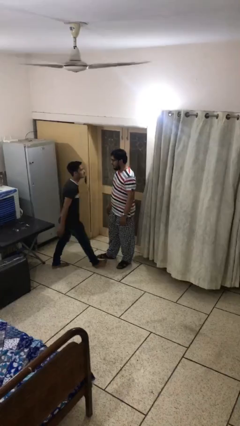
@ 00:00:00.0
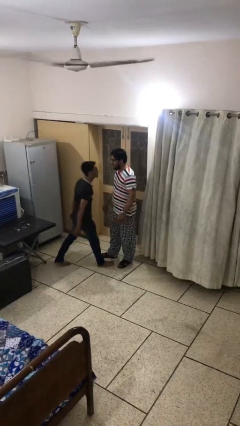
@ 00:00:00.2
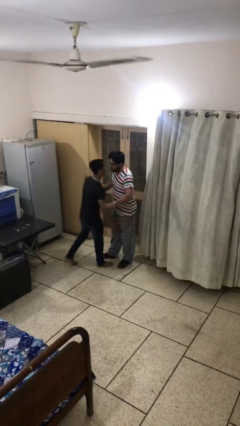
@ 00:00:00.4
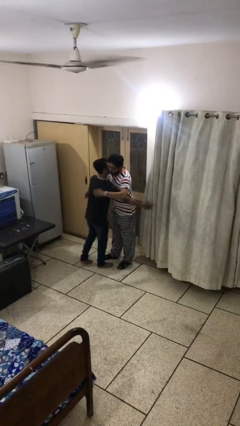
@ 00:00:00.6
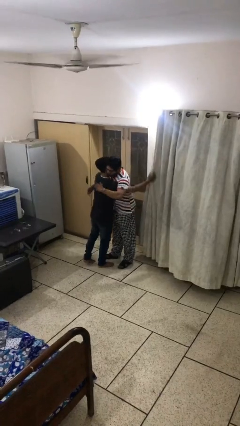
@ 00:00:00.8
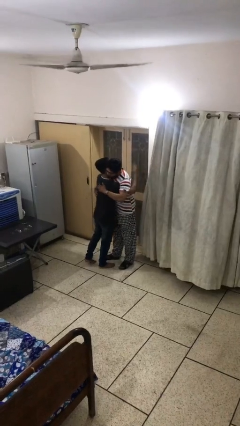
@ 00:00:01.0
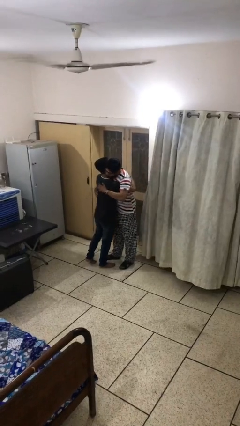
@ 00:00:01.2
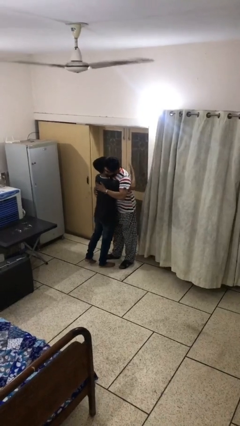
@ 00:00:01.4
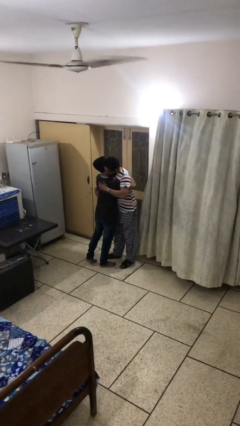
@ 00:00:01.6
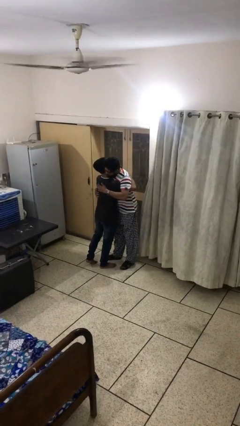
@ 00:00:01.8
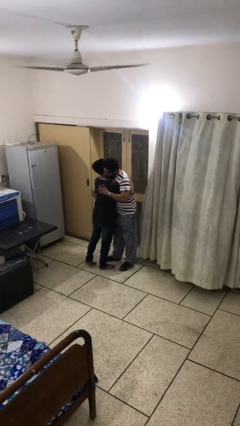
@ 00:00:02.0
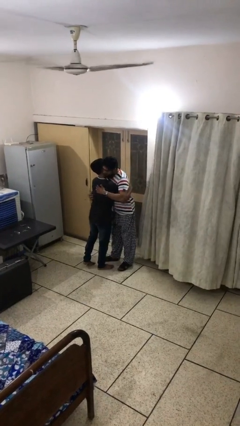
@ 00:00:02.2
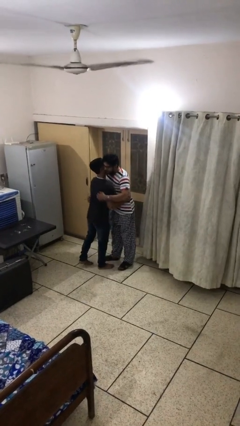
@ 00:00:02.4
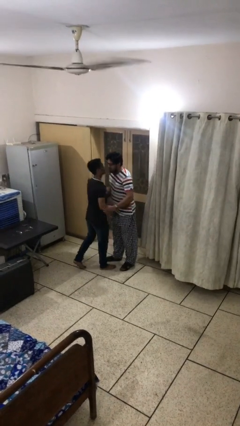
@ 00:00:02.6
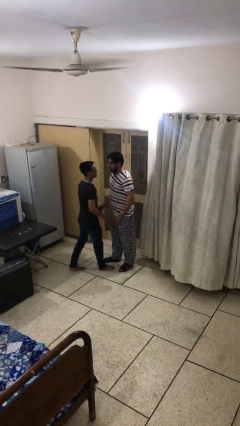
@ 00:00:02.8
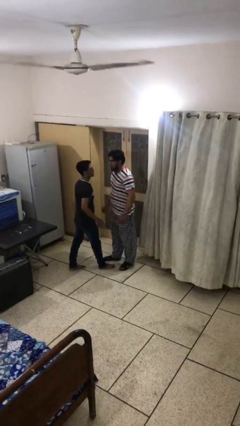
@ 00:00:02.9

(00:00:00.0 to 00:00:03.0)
person embraces person

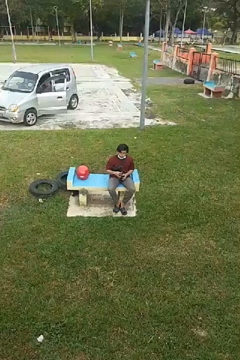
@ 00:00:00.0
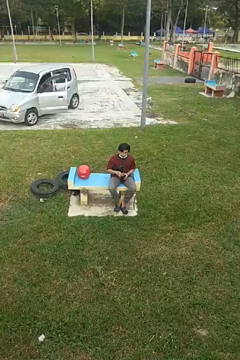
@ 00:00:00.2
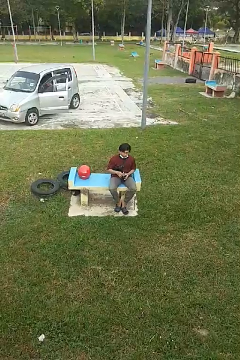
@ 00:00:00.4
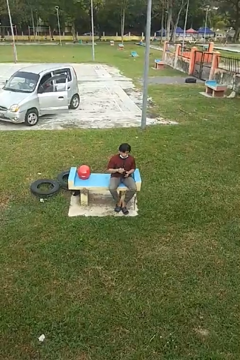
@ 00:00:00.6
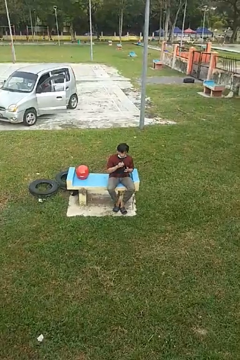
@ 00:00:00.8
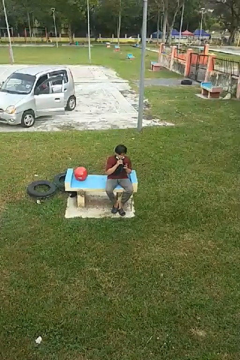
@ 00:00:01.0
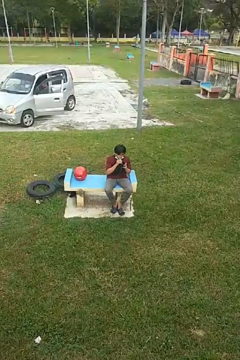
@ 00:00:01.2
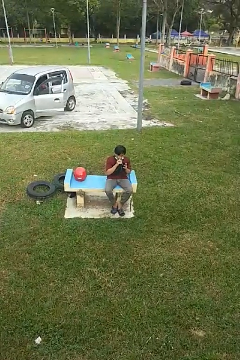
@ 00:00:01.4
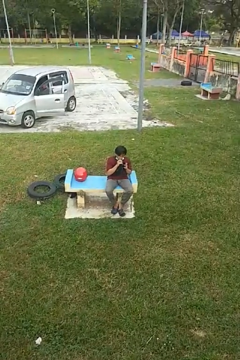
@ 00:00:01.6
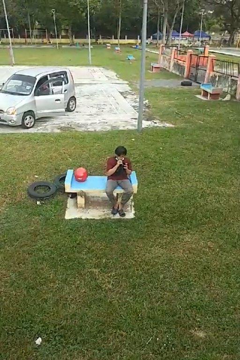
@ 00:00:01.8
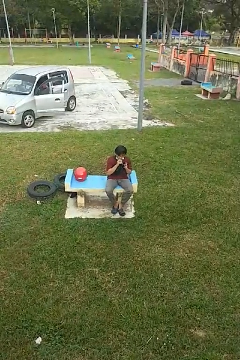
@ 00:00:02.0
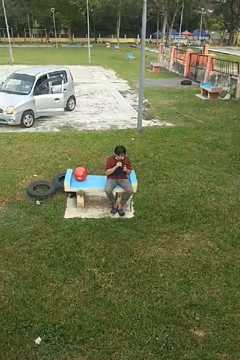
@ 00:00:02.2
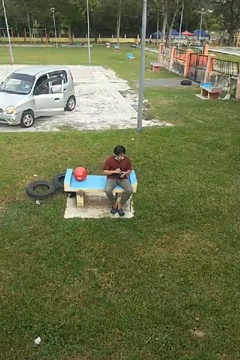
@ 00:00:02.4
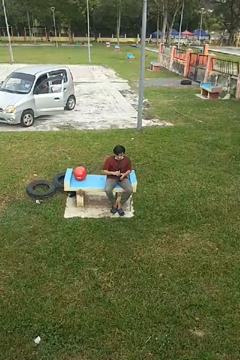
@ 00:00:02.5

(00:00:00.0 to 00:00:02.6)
person drinks from straw

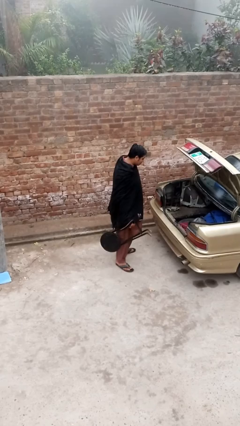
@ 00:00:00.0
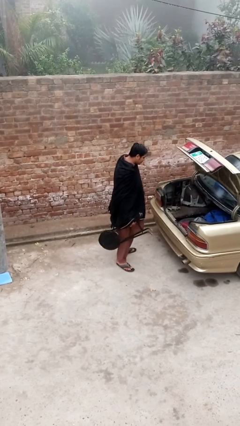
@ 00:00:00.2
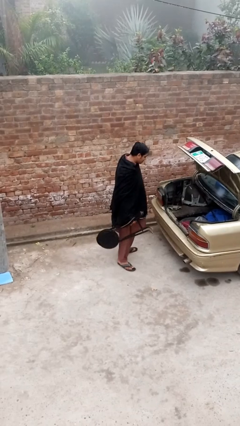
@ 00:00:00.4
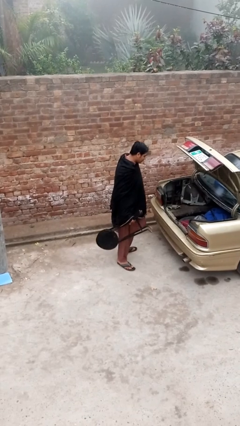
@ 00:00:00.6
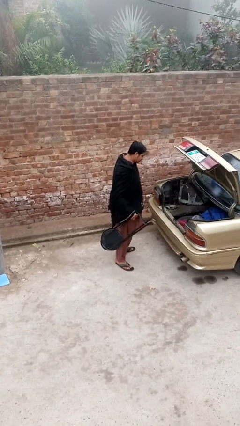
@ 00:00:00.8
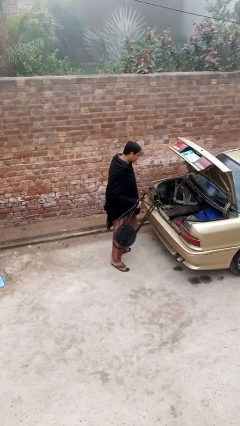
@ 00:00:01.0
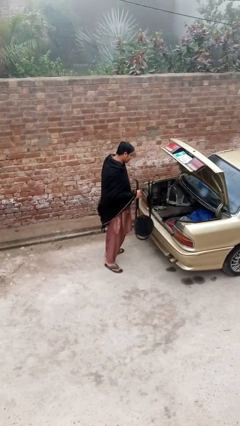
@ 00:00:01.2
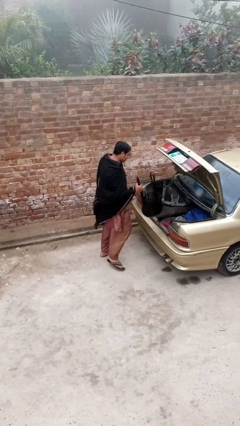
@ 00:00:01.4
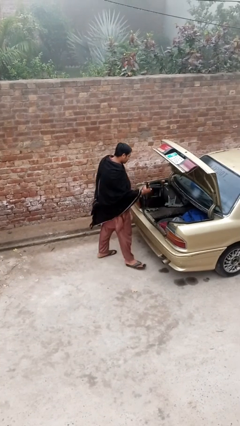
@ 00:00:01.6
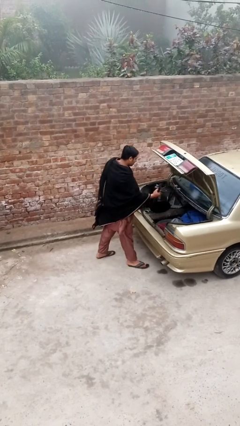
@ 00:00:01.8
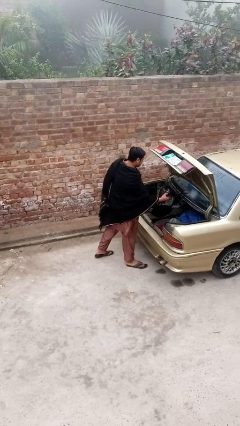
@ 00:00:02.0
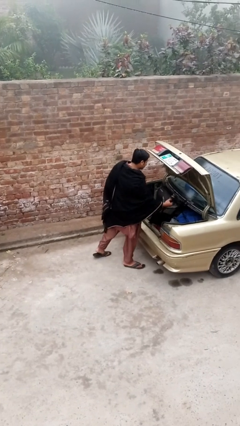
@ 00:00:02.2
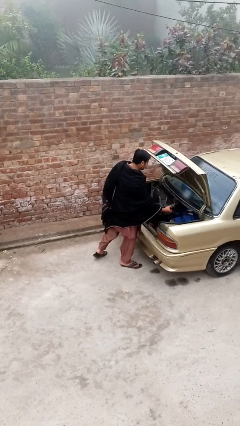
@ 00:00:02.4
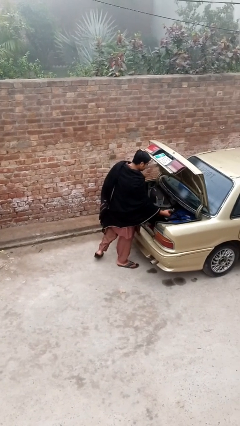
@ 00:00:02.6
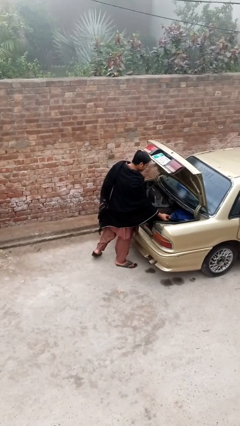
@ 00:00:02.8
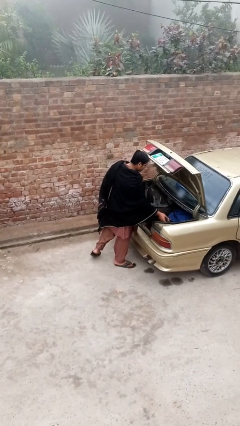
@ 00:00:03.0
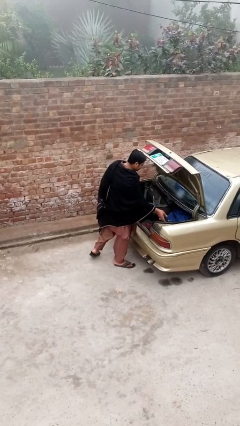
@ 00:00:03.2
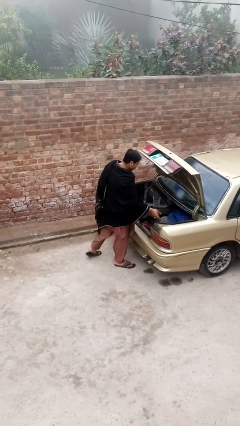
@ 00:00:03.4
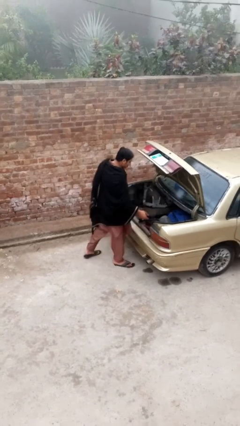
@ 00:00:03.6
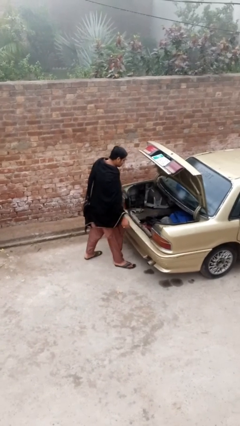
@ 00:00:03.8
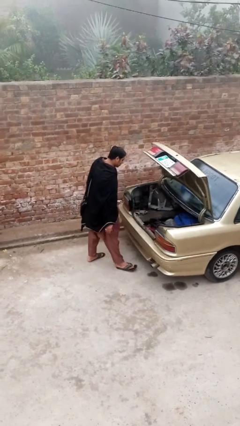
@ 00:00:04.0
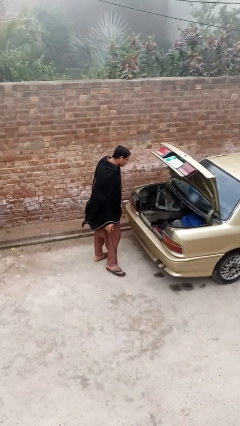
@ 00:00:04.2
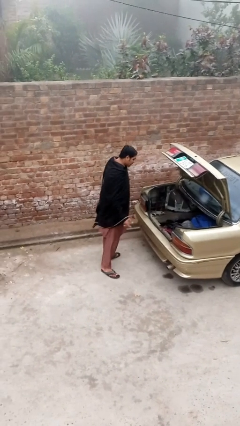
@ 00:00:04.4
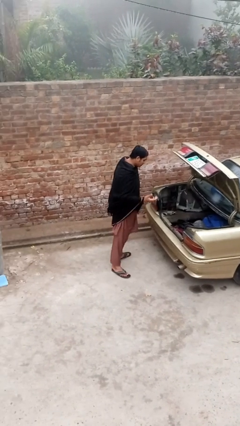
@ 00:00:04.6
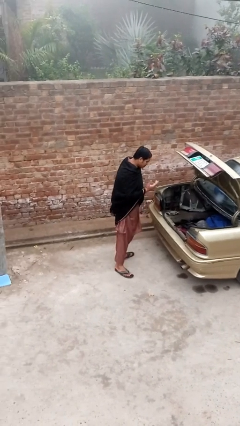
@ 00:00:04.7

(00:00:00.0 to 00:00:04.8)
person loads car

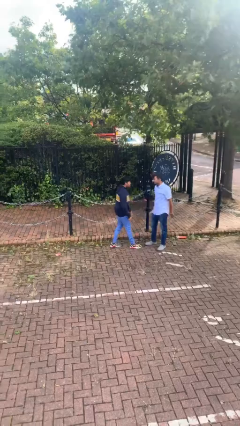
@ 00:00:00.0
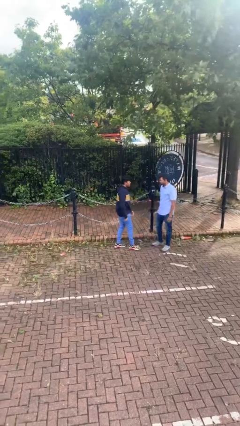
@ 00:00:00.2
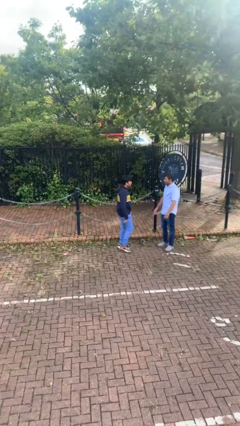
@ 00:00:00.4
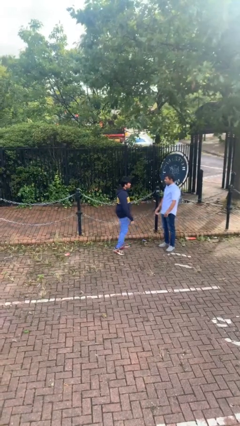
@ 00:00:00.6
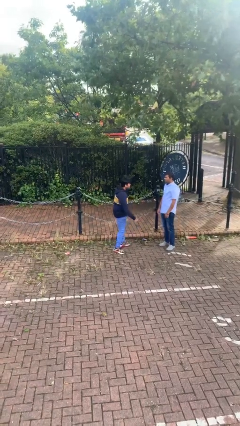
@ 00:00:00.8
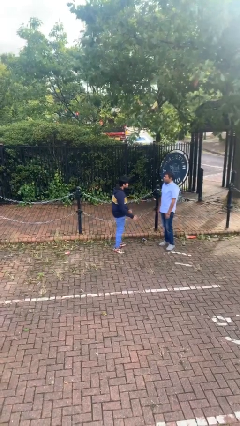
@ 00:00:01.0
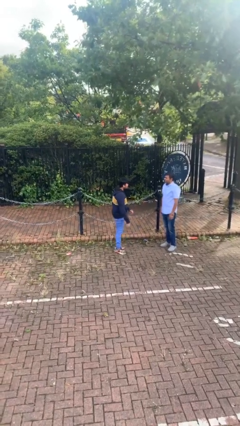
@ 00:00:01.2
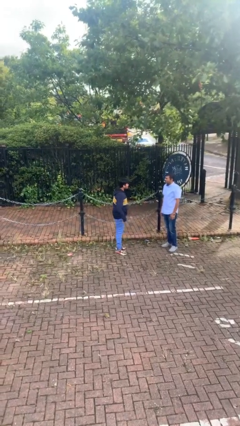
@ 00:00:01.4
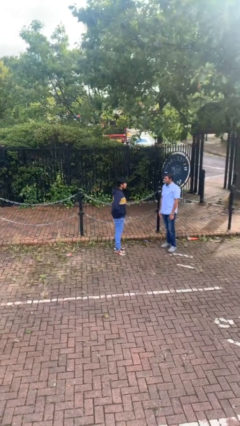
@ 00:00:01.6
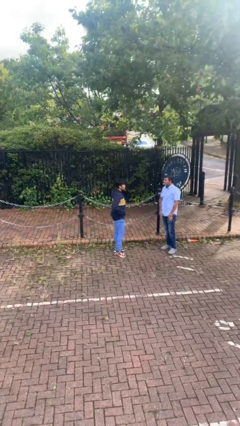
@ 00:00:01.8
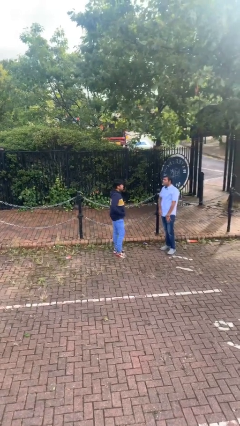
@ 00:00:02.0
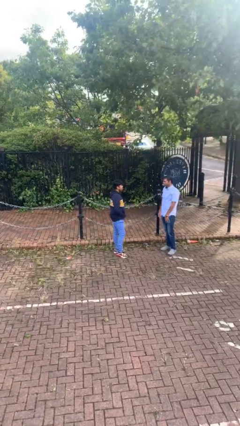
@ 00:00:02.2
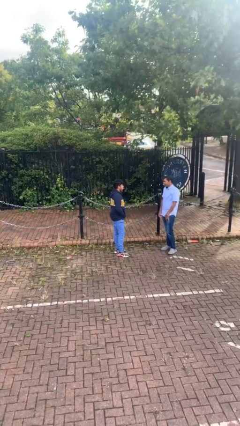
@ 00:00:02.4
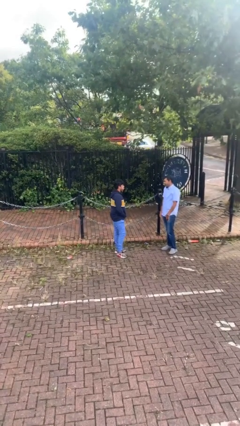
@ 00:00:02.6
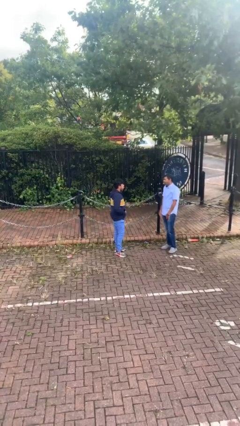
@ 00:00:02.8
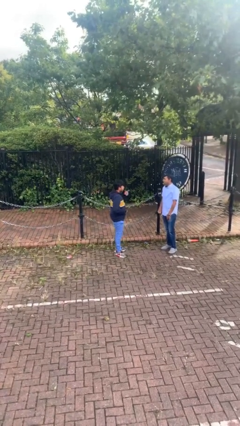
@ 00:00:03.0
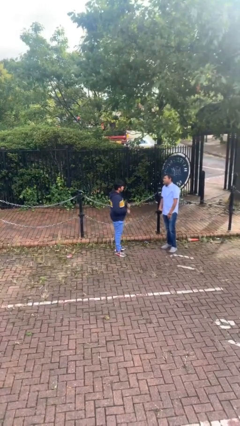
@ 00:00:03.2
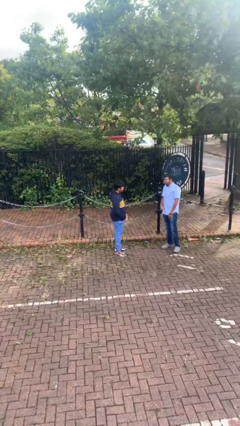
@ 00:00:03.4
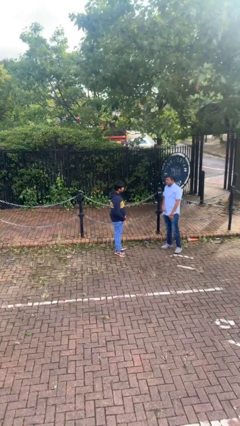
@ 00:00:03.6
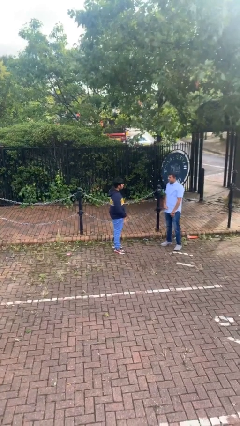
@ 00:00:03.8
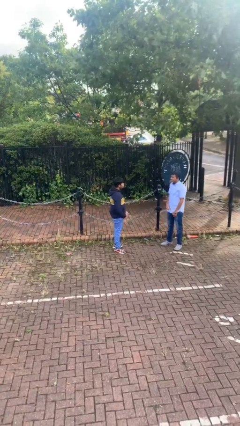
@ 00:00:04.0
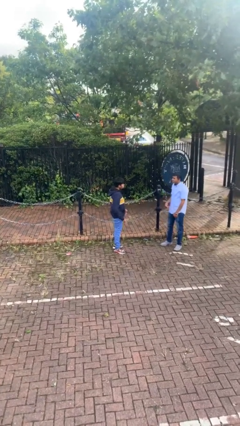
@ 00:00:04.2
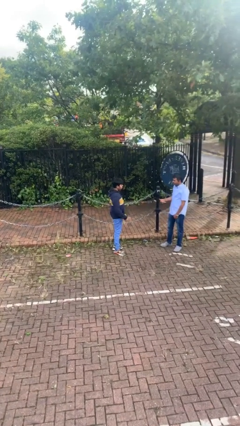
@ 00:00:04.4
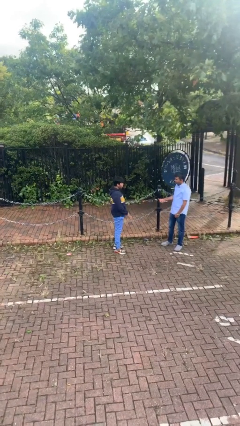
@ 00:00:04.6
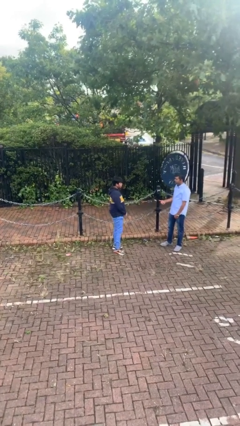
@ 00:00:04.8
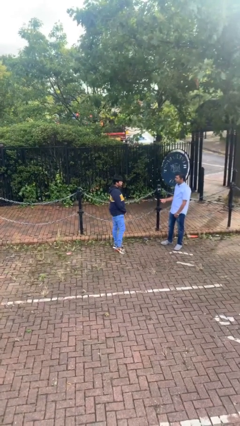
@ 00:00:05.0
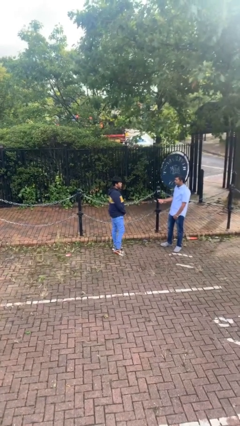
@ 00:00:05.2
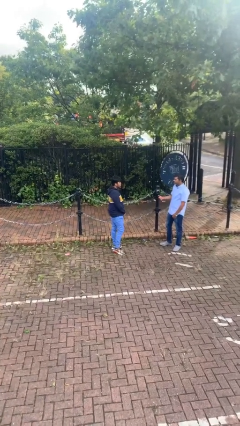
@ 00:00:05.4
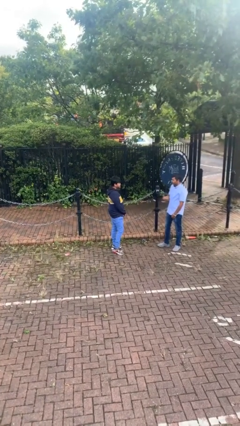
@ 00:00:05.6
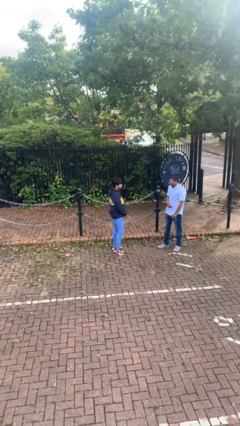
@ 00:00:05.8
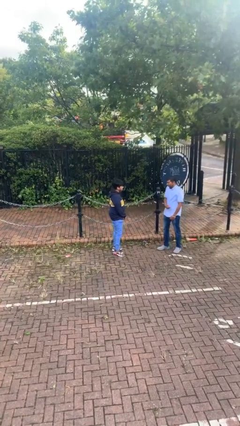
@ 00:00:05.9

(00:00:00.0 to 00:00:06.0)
person talks to person

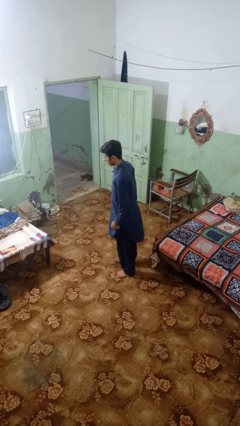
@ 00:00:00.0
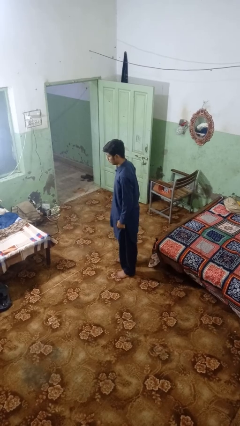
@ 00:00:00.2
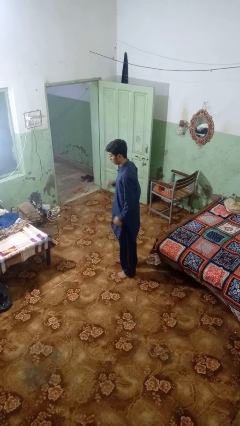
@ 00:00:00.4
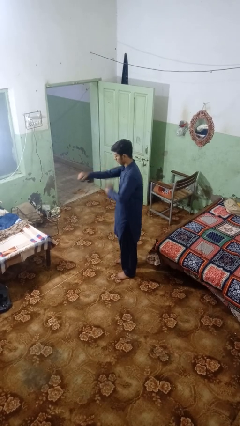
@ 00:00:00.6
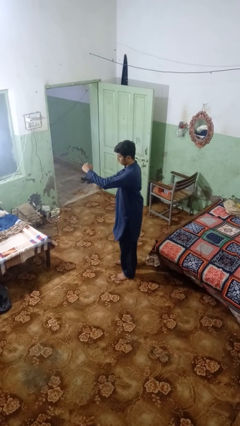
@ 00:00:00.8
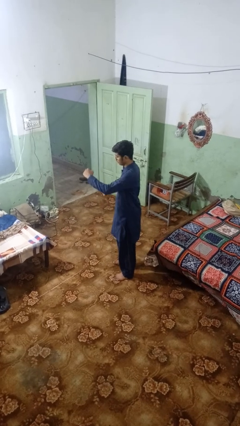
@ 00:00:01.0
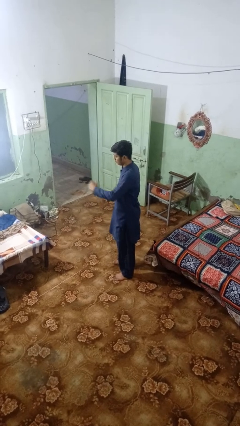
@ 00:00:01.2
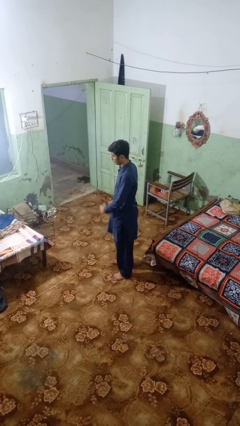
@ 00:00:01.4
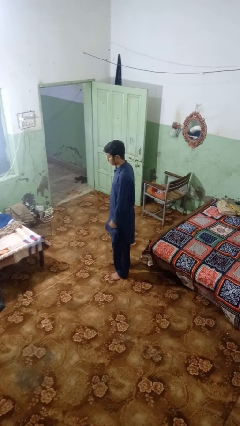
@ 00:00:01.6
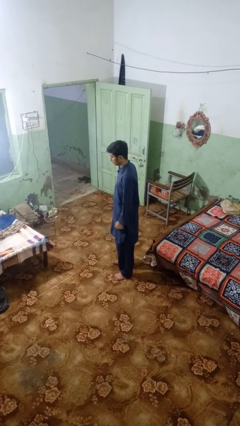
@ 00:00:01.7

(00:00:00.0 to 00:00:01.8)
person karate chop
